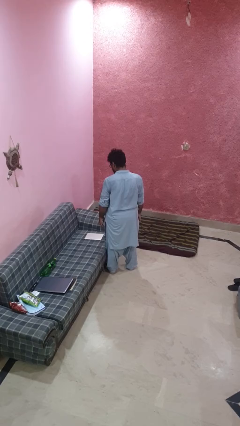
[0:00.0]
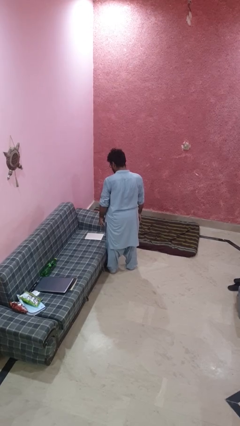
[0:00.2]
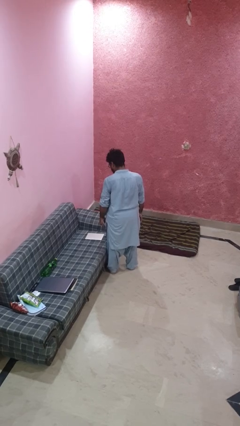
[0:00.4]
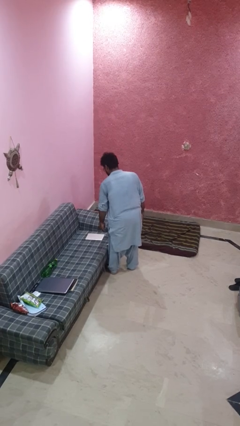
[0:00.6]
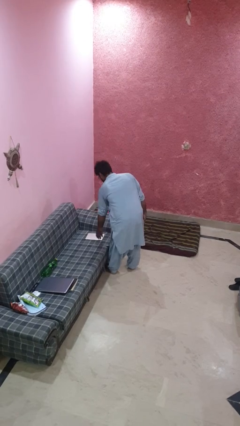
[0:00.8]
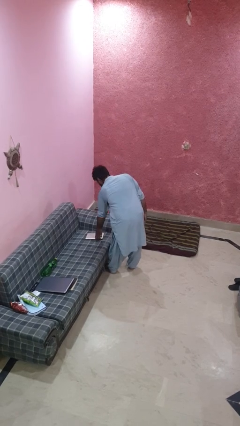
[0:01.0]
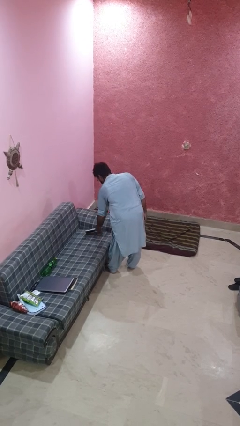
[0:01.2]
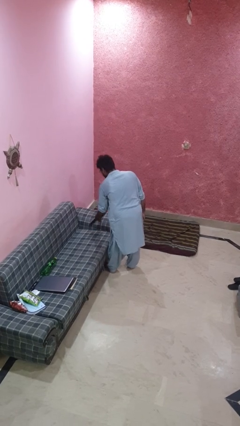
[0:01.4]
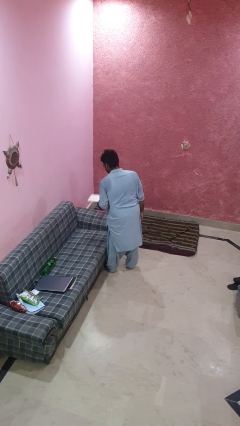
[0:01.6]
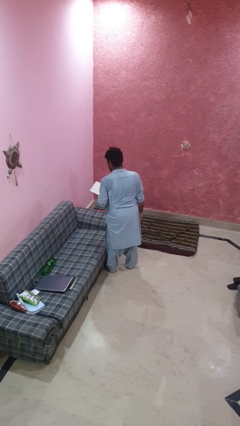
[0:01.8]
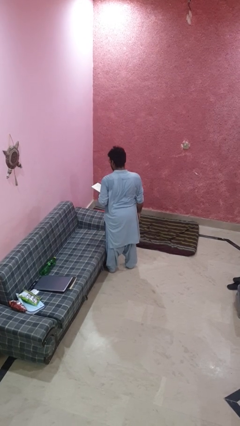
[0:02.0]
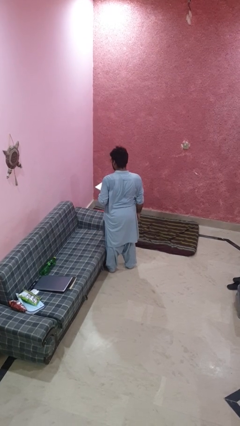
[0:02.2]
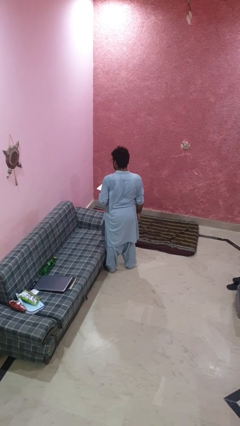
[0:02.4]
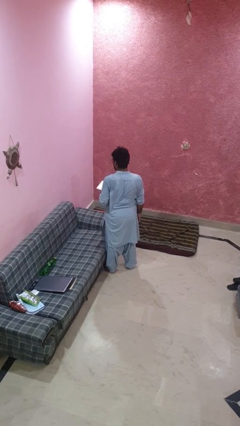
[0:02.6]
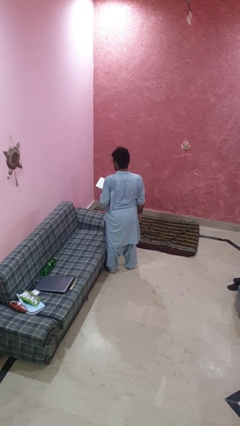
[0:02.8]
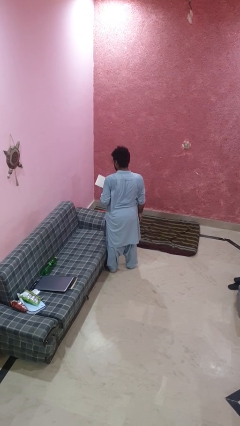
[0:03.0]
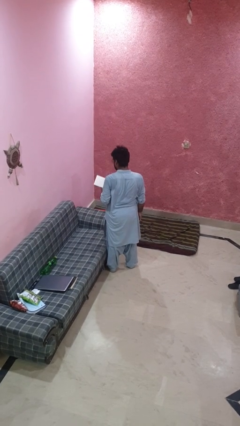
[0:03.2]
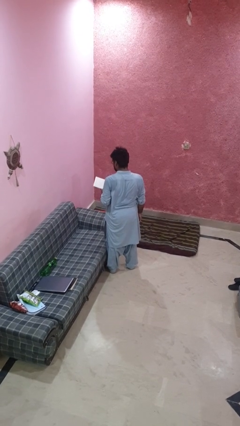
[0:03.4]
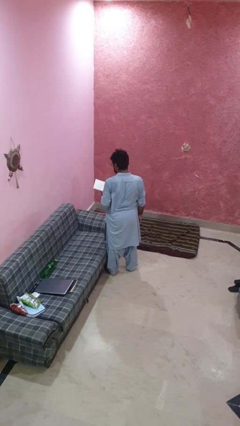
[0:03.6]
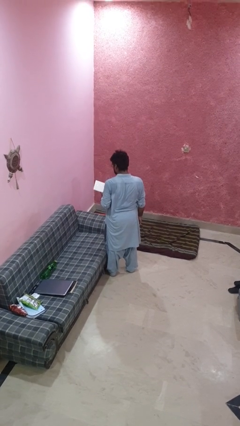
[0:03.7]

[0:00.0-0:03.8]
person picks up object from couch

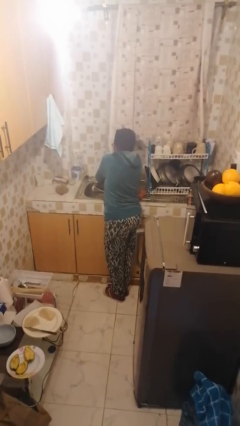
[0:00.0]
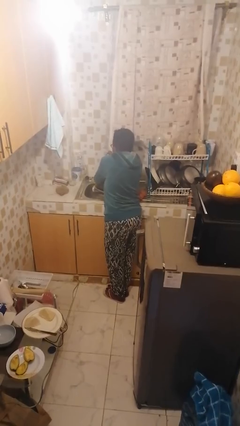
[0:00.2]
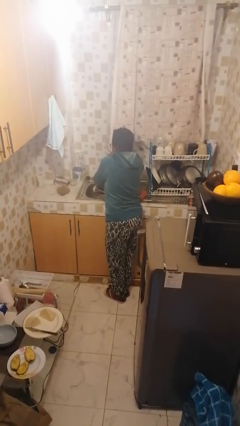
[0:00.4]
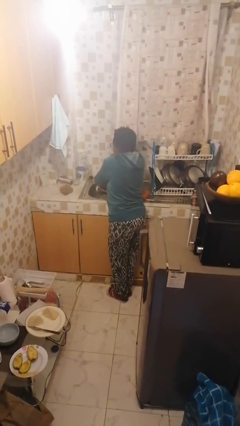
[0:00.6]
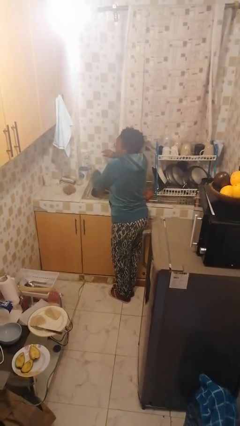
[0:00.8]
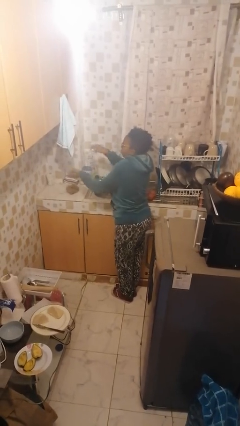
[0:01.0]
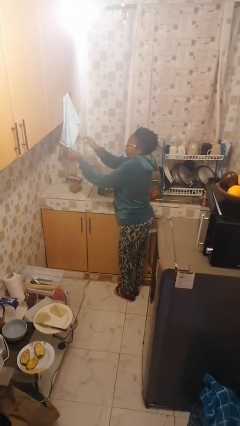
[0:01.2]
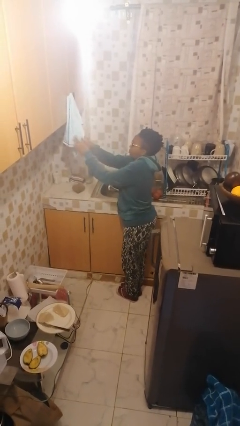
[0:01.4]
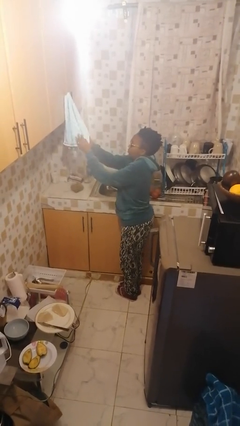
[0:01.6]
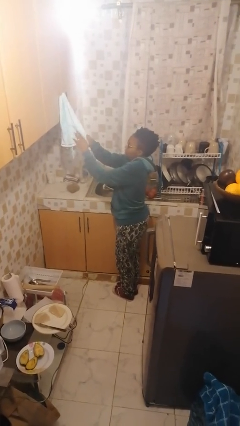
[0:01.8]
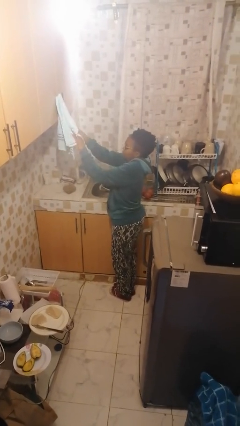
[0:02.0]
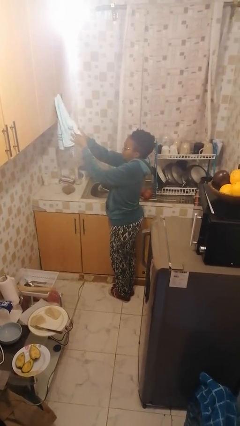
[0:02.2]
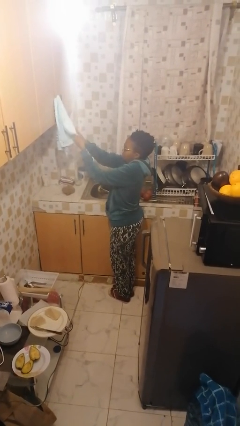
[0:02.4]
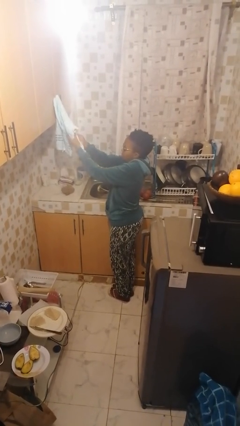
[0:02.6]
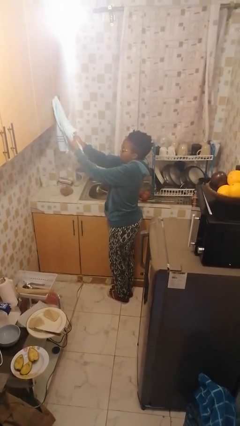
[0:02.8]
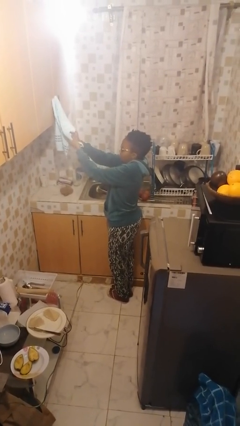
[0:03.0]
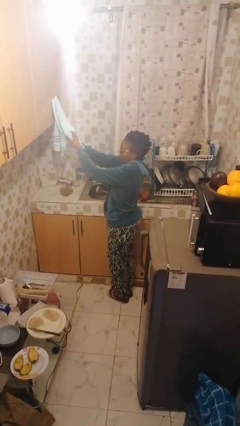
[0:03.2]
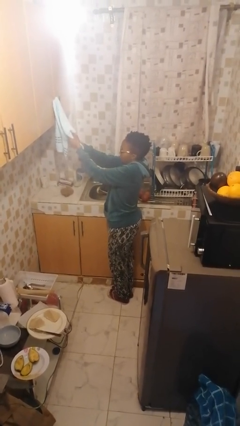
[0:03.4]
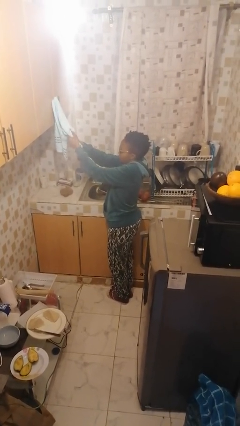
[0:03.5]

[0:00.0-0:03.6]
person dries hands with towel

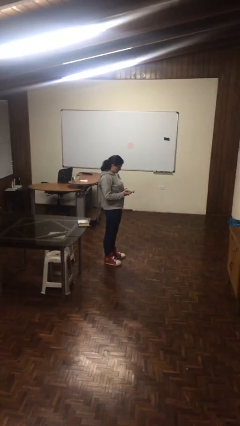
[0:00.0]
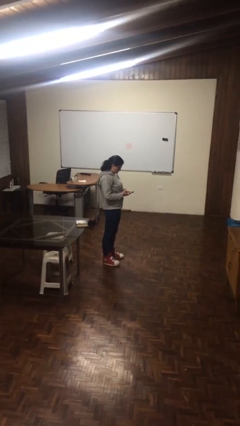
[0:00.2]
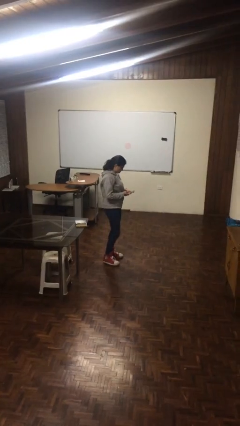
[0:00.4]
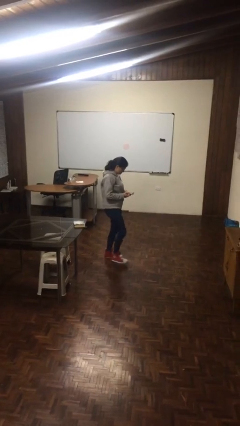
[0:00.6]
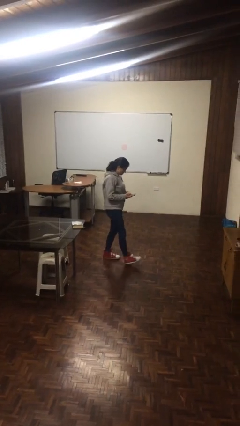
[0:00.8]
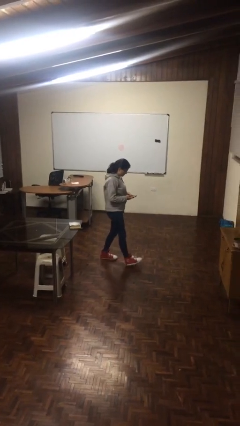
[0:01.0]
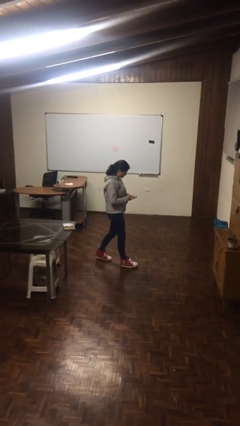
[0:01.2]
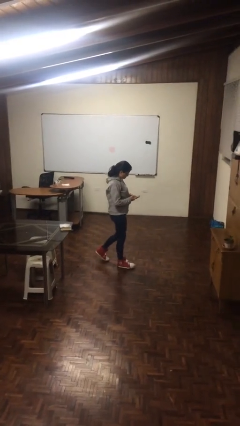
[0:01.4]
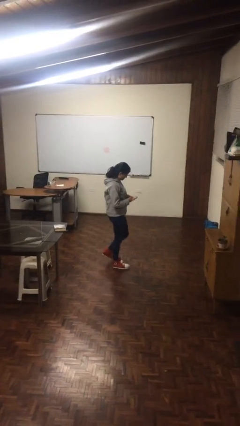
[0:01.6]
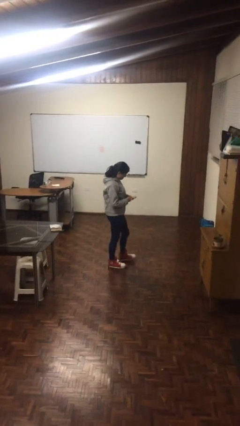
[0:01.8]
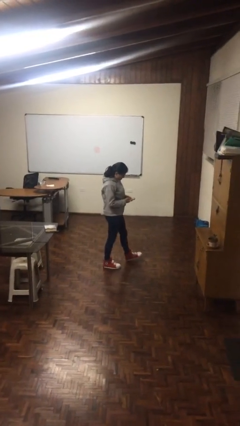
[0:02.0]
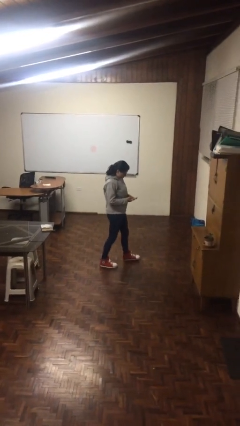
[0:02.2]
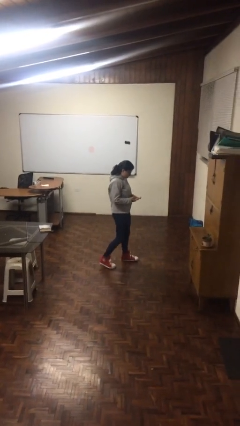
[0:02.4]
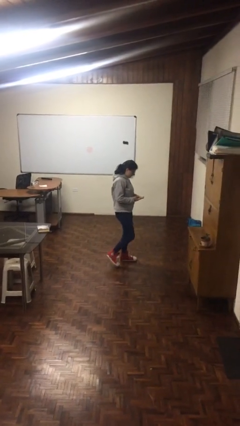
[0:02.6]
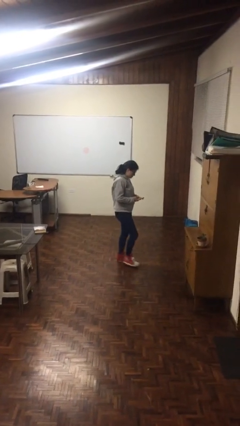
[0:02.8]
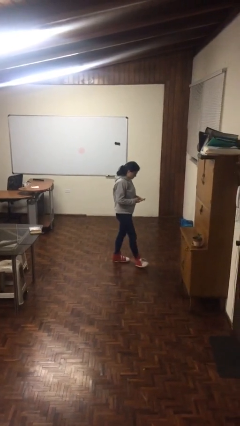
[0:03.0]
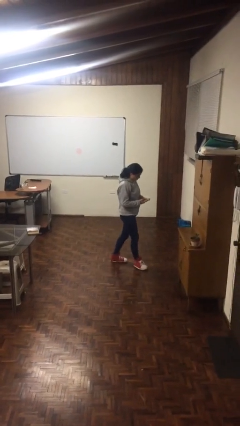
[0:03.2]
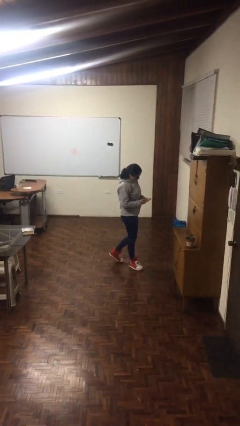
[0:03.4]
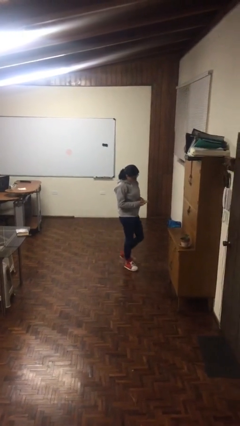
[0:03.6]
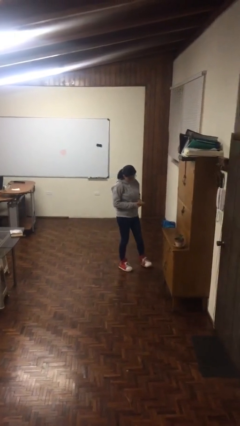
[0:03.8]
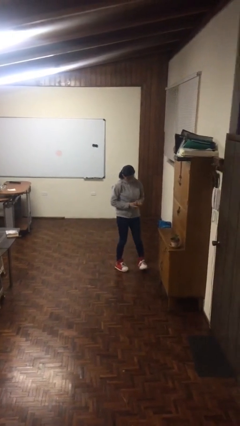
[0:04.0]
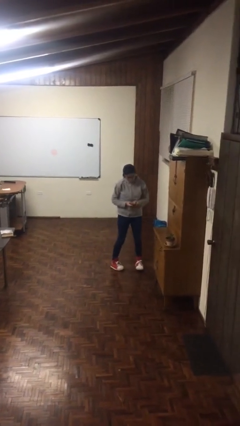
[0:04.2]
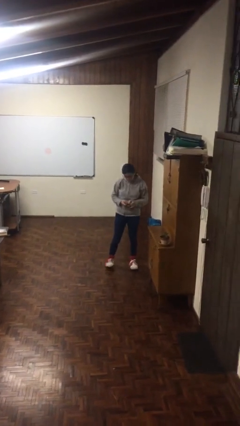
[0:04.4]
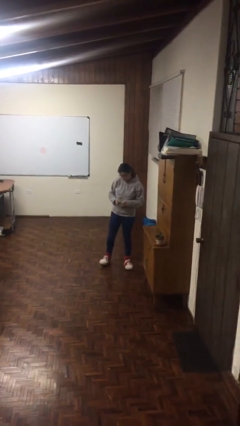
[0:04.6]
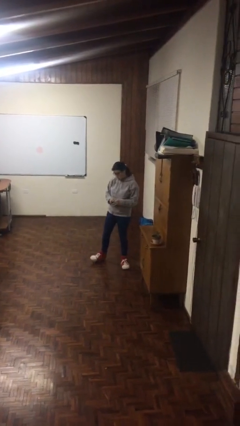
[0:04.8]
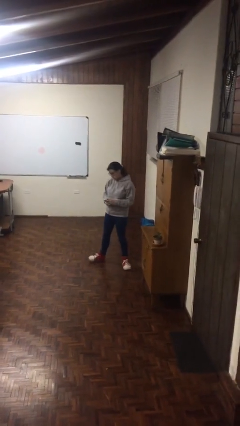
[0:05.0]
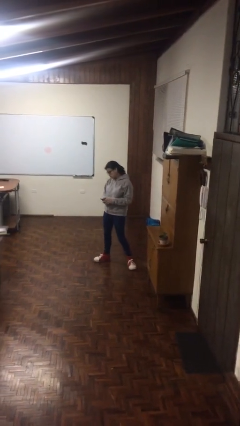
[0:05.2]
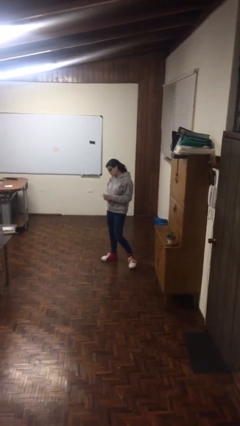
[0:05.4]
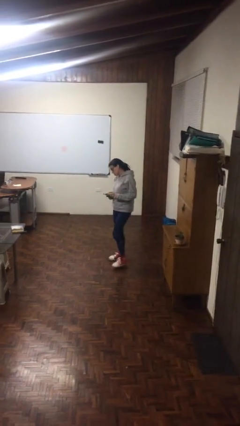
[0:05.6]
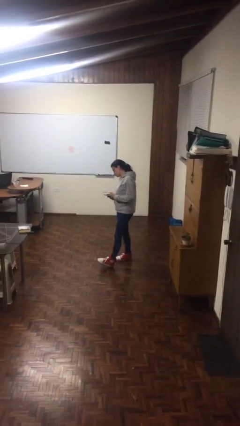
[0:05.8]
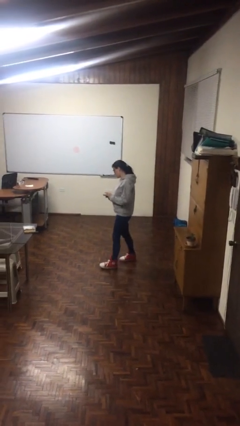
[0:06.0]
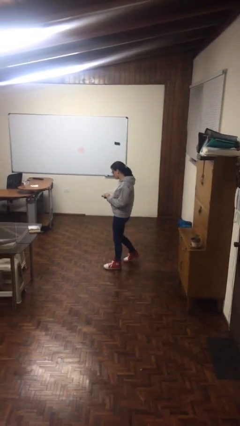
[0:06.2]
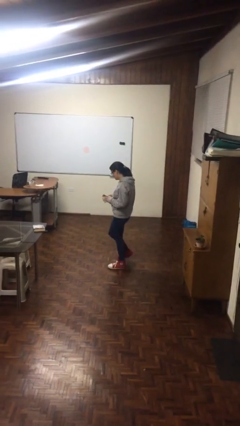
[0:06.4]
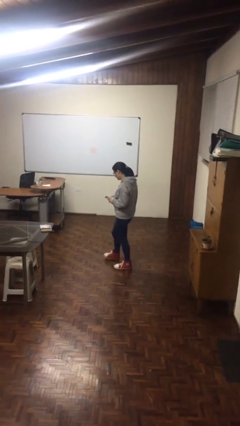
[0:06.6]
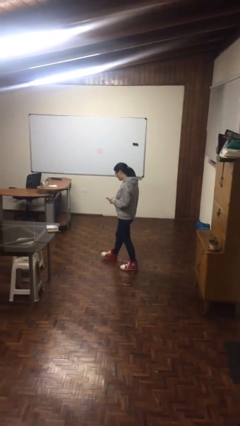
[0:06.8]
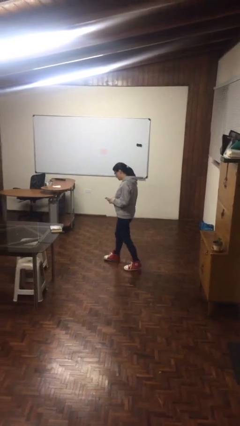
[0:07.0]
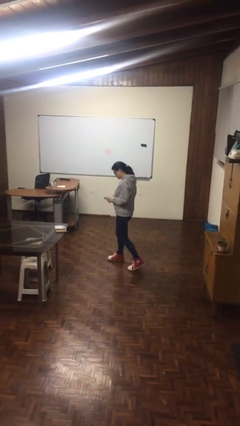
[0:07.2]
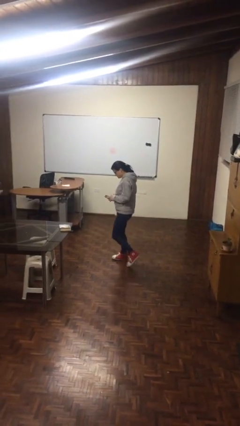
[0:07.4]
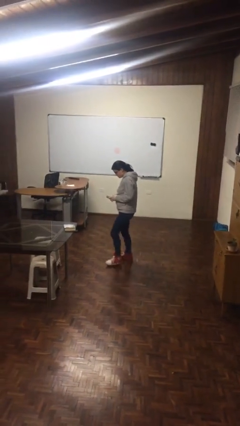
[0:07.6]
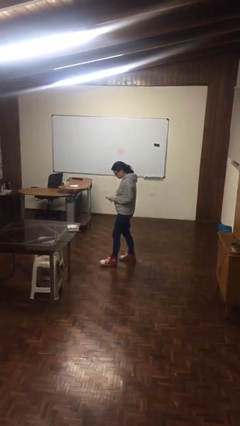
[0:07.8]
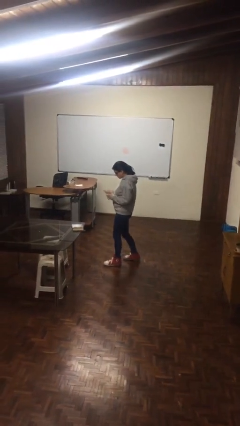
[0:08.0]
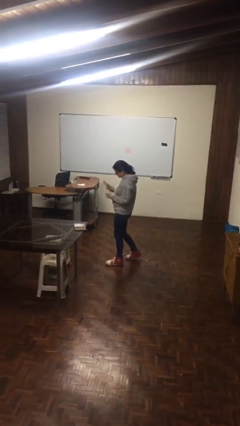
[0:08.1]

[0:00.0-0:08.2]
person texts on phone

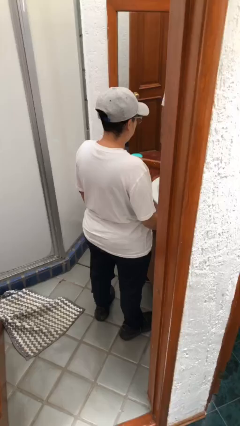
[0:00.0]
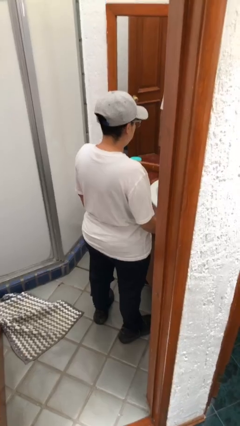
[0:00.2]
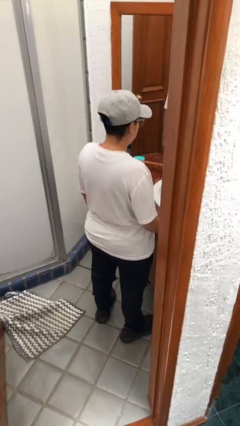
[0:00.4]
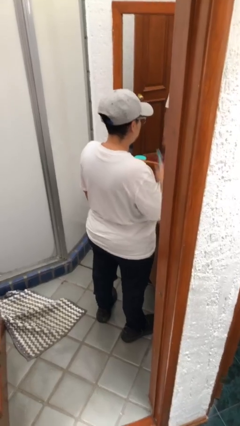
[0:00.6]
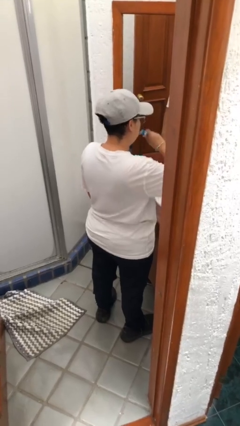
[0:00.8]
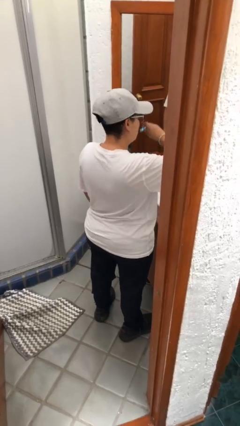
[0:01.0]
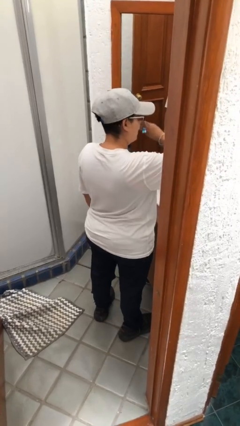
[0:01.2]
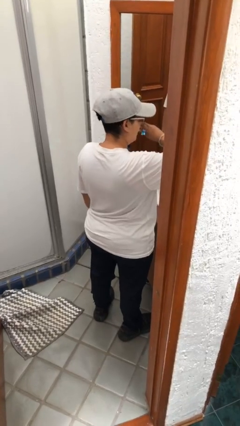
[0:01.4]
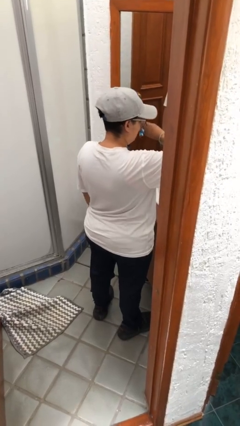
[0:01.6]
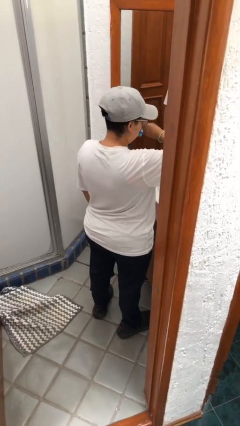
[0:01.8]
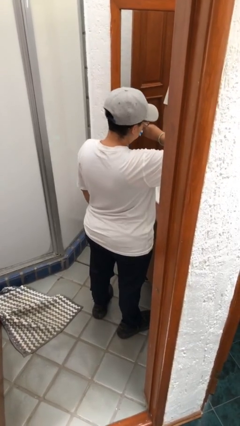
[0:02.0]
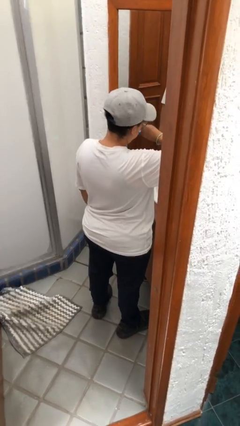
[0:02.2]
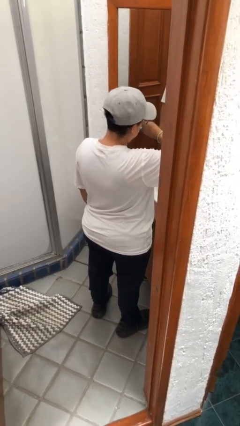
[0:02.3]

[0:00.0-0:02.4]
person brushes teeth
